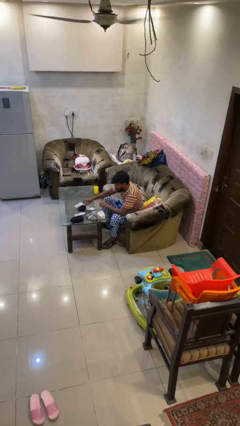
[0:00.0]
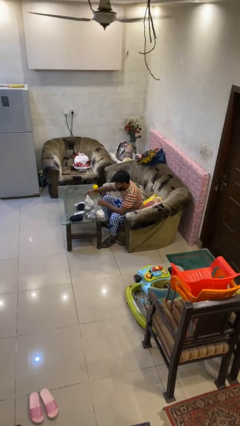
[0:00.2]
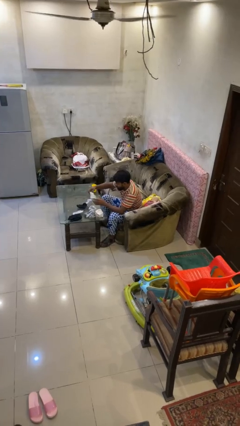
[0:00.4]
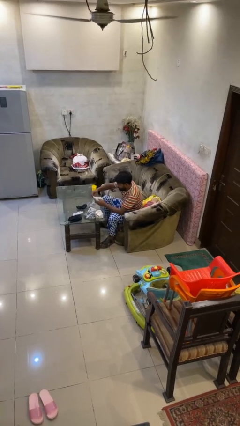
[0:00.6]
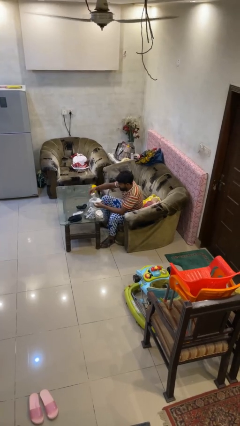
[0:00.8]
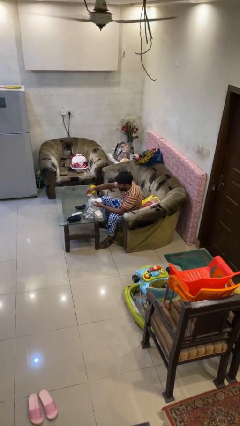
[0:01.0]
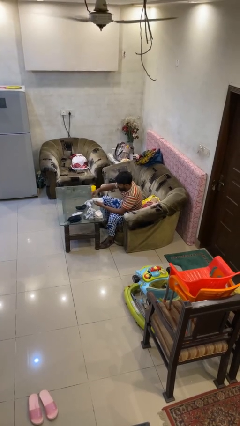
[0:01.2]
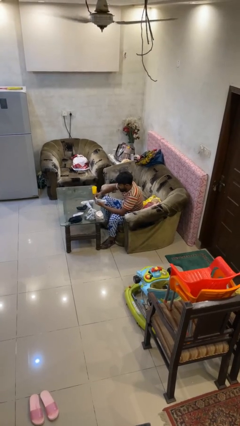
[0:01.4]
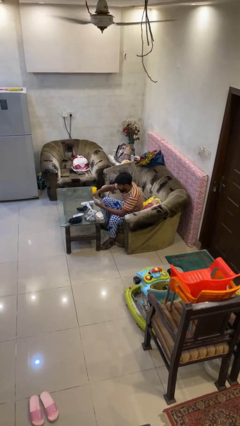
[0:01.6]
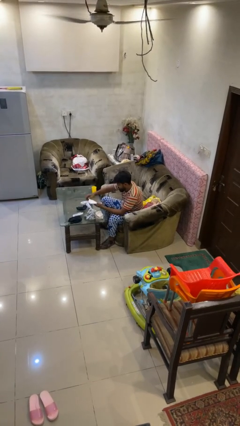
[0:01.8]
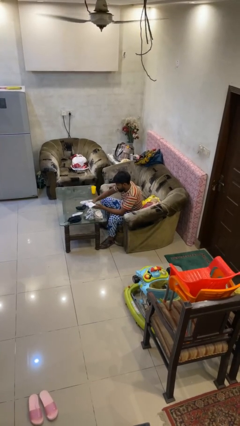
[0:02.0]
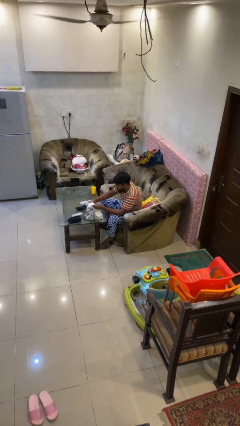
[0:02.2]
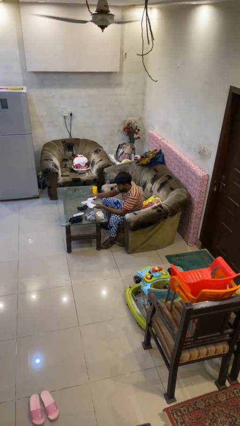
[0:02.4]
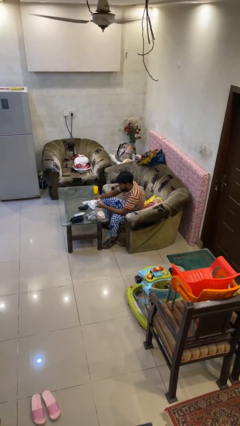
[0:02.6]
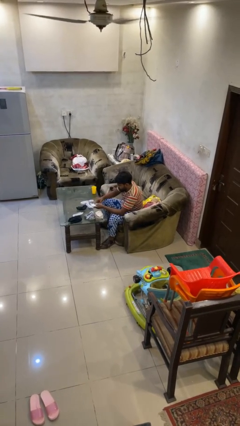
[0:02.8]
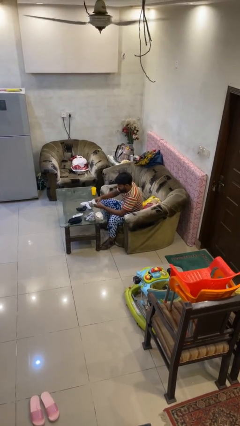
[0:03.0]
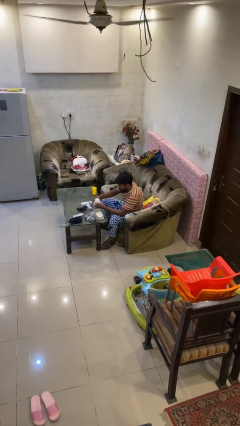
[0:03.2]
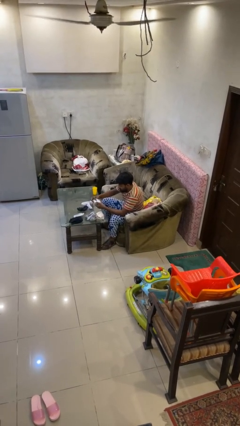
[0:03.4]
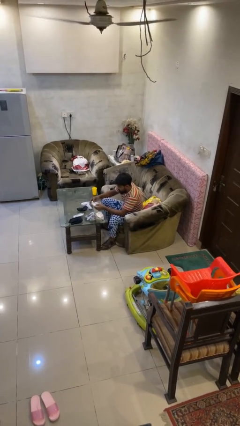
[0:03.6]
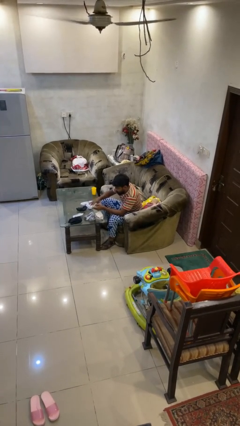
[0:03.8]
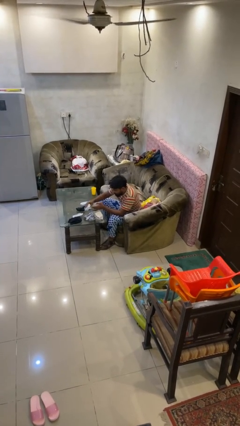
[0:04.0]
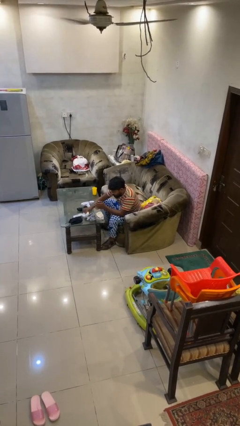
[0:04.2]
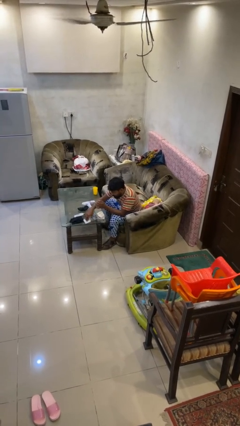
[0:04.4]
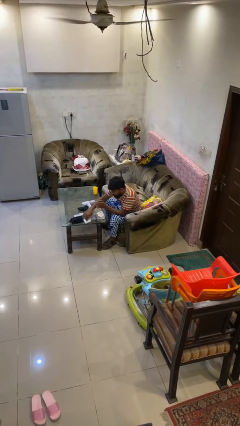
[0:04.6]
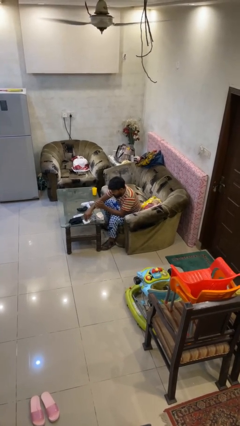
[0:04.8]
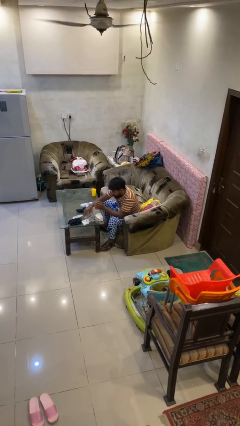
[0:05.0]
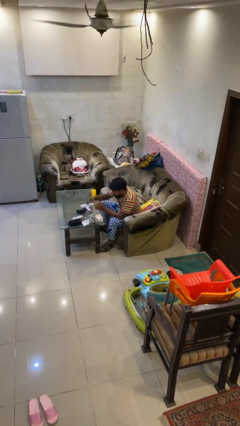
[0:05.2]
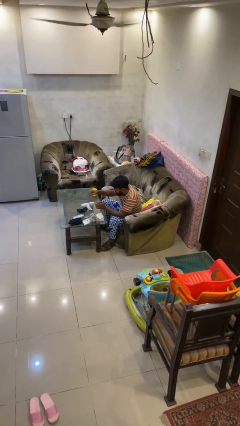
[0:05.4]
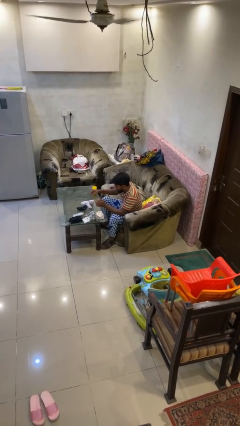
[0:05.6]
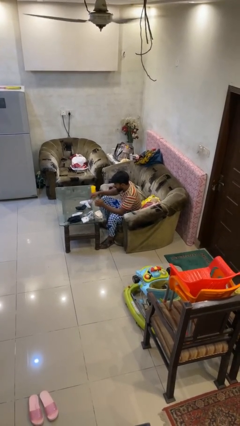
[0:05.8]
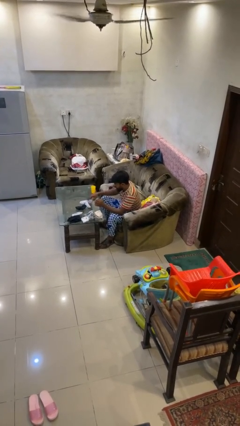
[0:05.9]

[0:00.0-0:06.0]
person folds socks

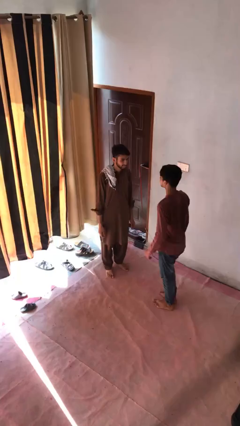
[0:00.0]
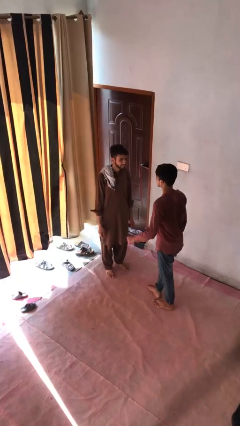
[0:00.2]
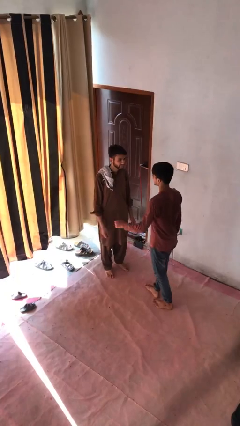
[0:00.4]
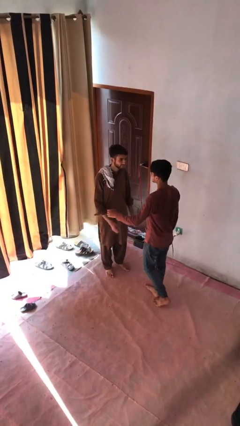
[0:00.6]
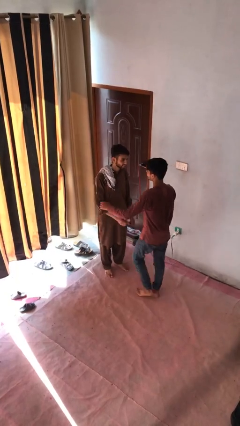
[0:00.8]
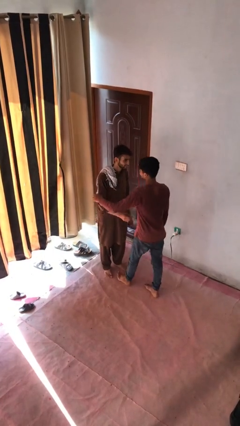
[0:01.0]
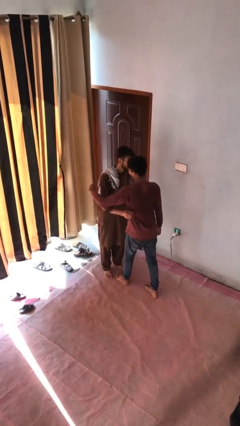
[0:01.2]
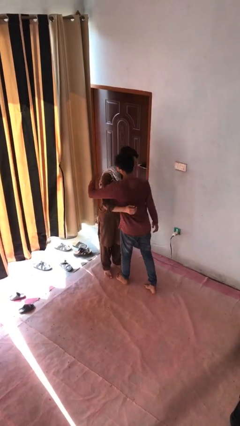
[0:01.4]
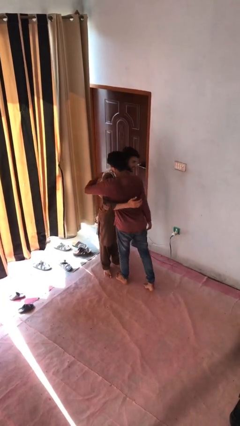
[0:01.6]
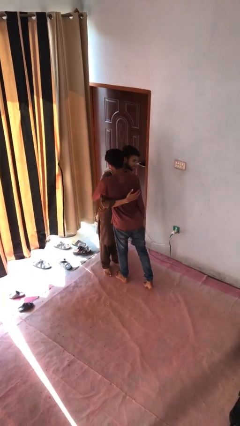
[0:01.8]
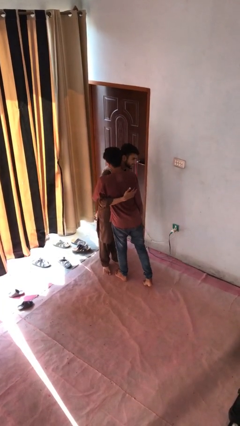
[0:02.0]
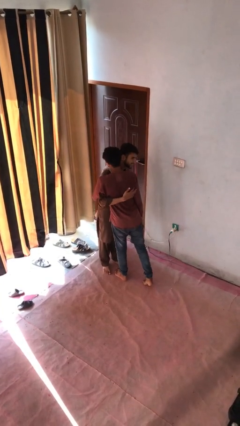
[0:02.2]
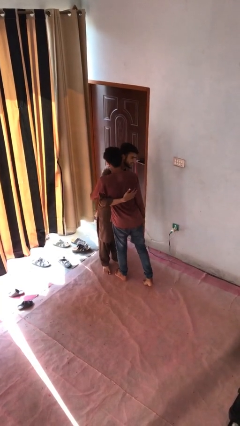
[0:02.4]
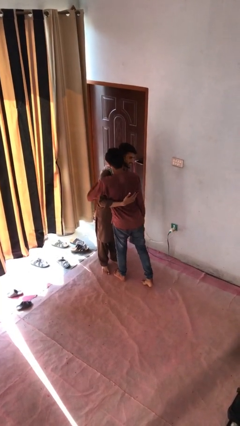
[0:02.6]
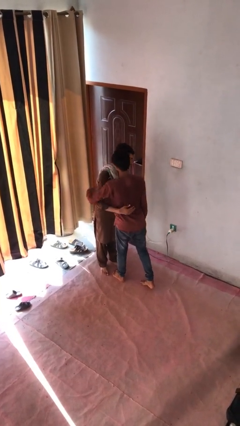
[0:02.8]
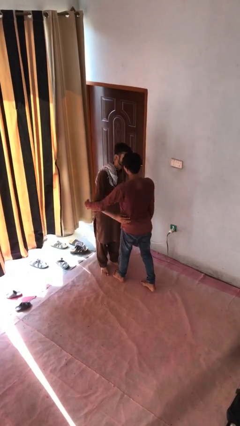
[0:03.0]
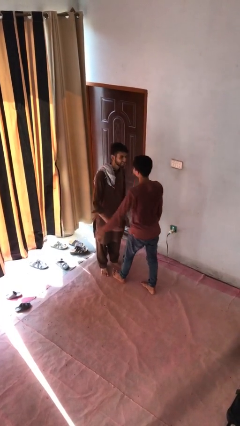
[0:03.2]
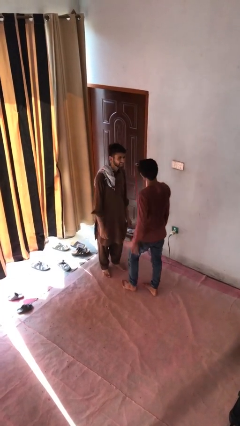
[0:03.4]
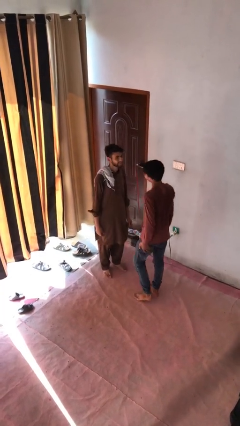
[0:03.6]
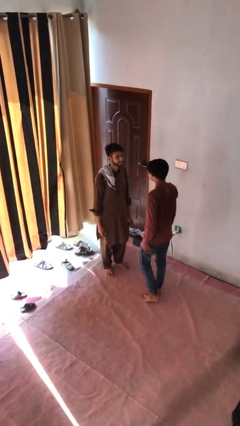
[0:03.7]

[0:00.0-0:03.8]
person embraces person

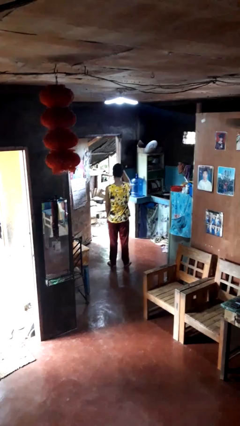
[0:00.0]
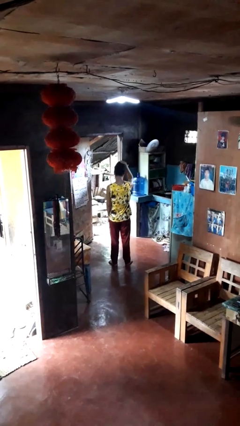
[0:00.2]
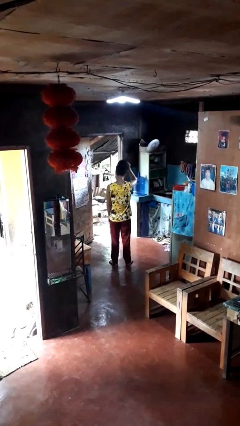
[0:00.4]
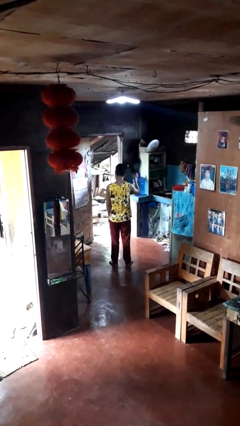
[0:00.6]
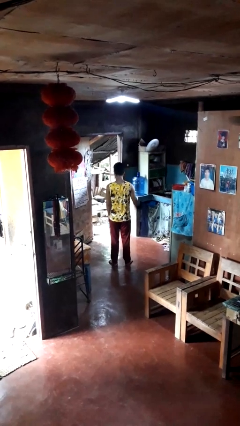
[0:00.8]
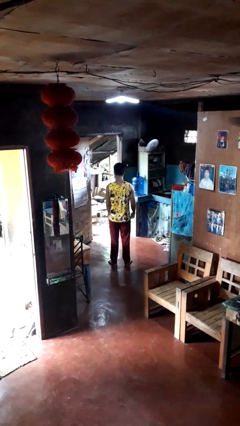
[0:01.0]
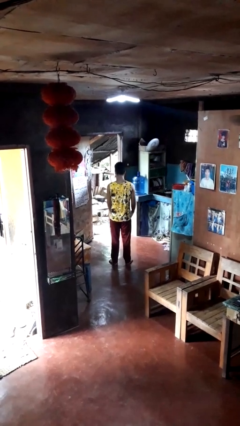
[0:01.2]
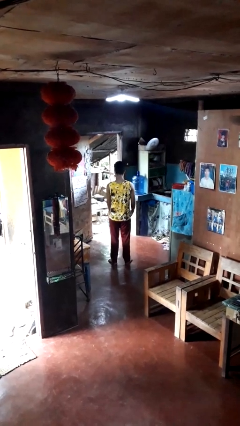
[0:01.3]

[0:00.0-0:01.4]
person takes off hat

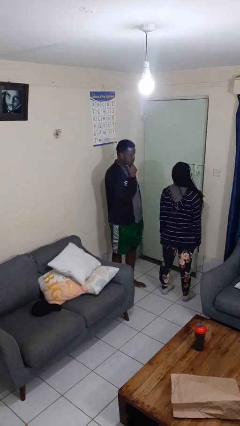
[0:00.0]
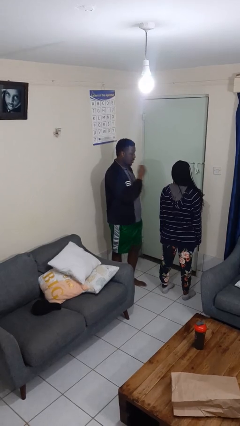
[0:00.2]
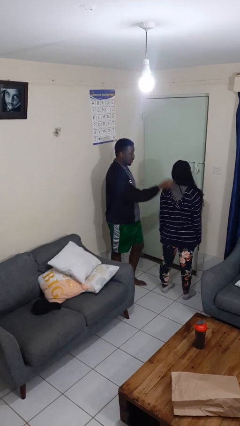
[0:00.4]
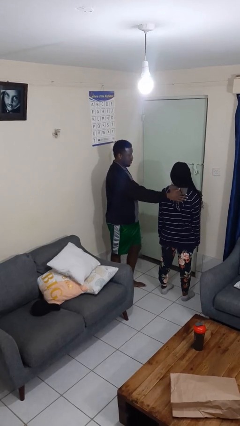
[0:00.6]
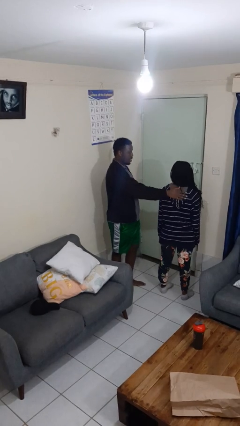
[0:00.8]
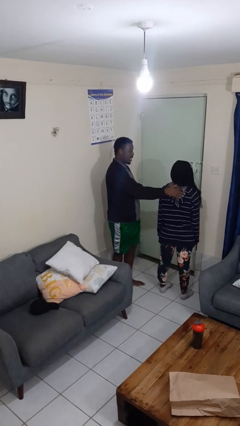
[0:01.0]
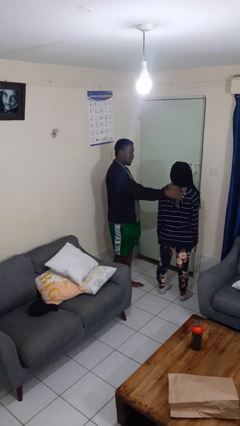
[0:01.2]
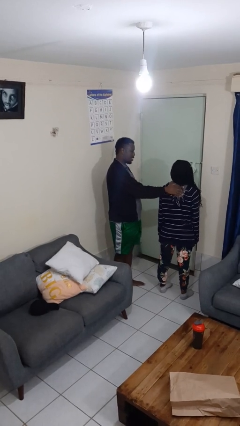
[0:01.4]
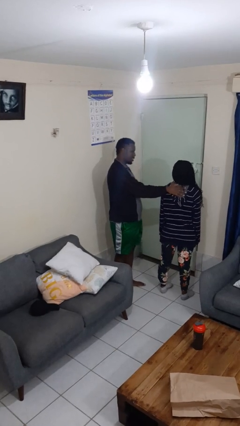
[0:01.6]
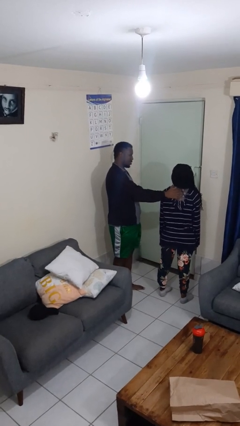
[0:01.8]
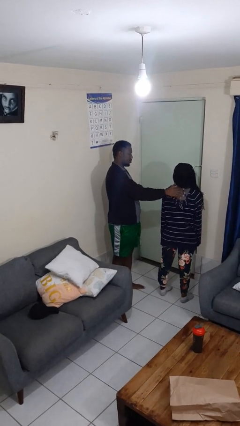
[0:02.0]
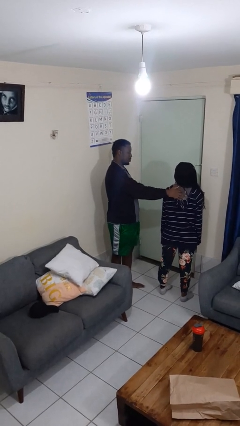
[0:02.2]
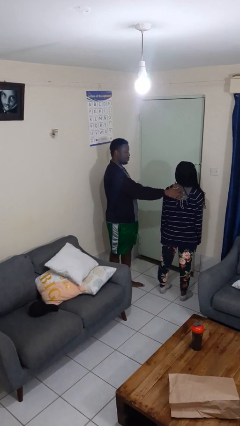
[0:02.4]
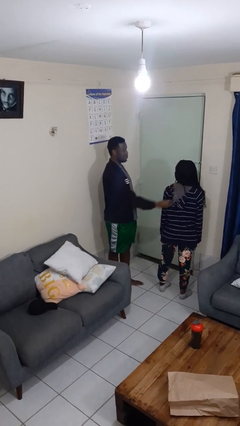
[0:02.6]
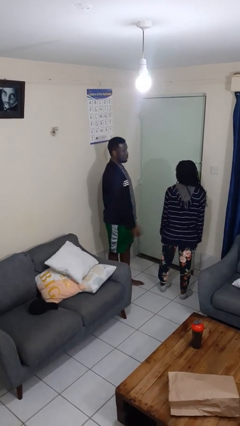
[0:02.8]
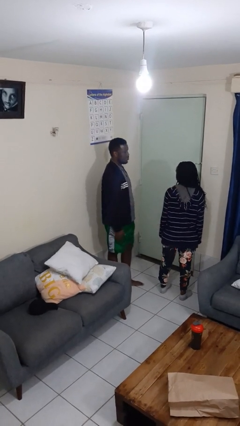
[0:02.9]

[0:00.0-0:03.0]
person touches back of person

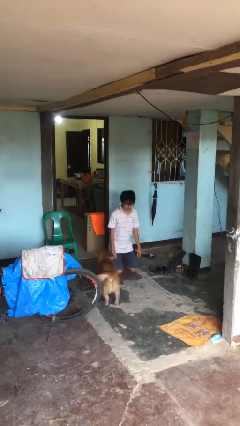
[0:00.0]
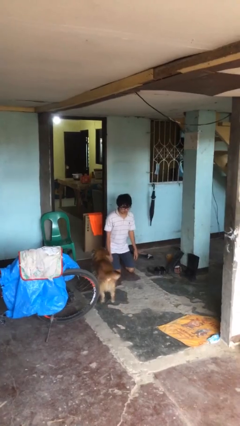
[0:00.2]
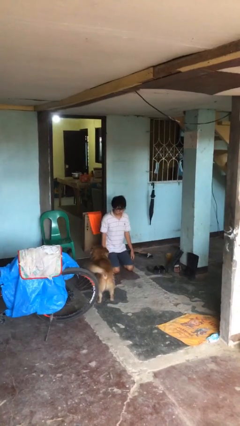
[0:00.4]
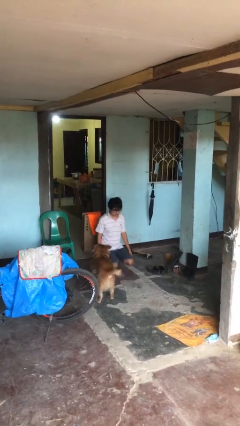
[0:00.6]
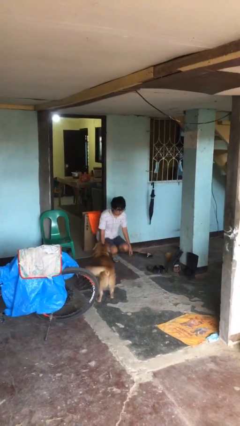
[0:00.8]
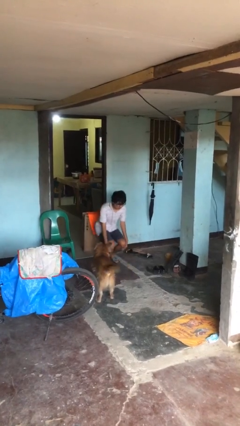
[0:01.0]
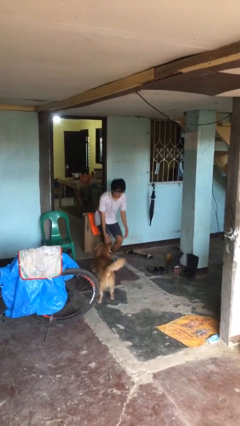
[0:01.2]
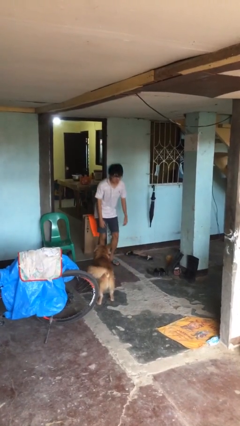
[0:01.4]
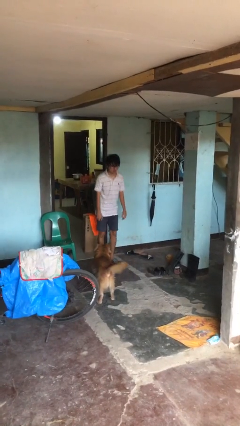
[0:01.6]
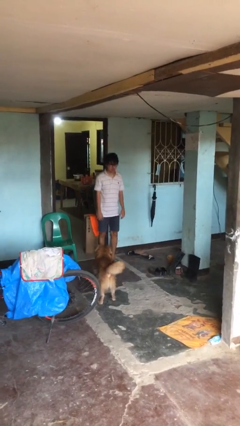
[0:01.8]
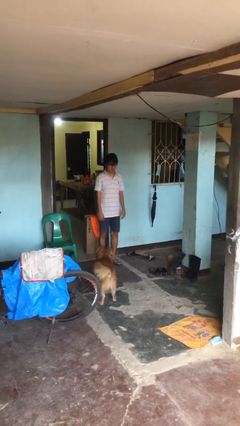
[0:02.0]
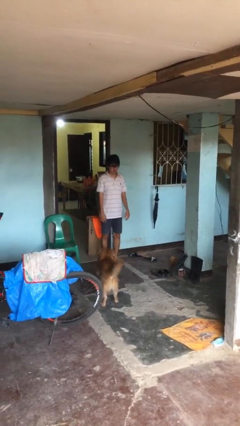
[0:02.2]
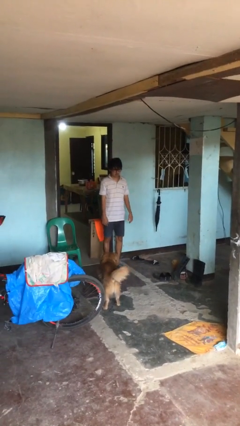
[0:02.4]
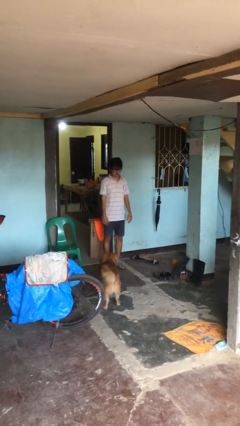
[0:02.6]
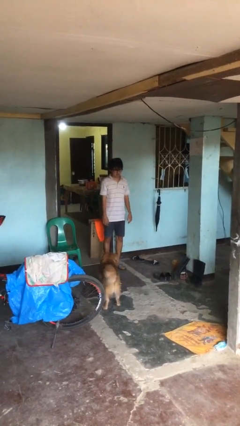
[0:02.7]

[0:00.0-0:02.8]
person stands up from floor

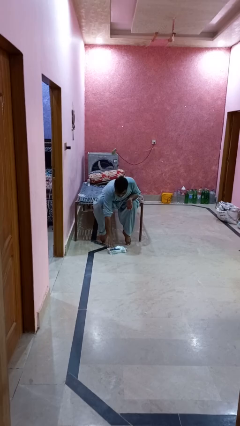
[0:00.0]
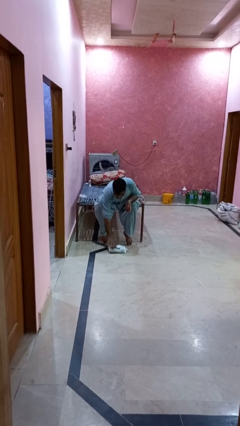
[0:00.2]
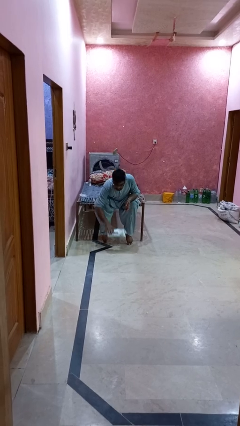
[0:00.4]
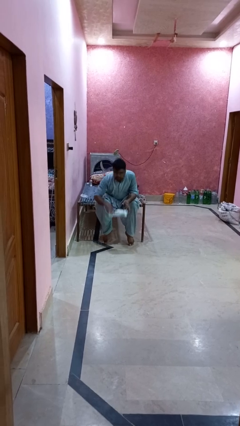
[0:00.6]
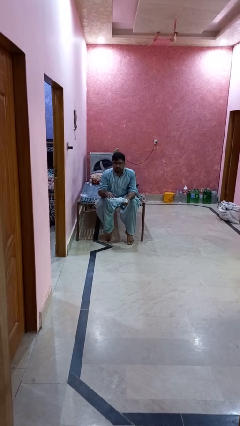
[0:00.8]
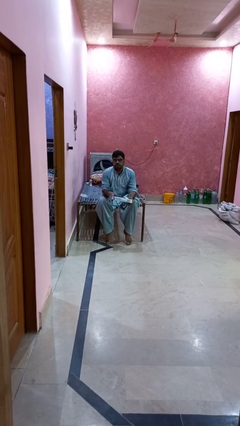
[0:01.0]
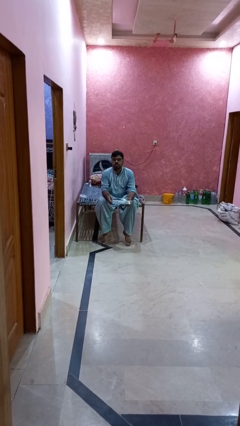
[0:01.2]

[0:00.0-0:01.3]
person picks up object from floor
